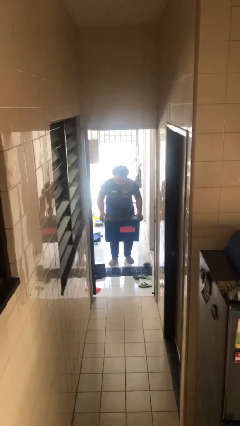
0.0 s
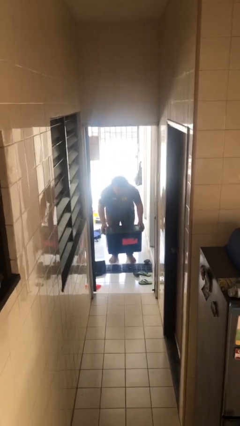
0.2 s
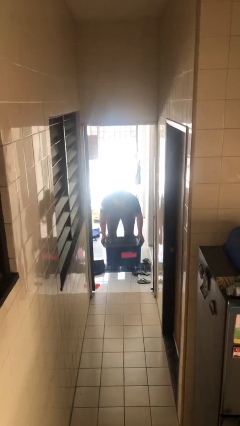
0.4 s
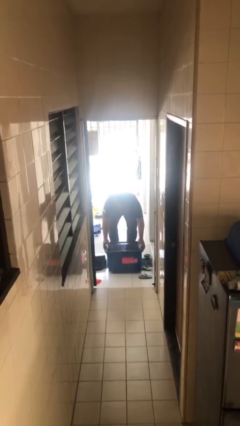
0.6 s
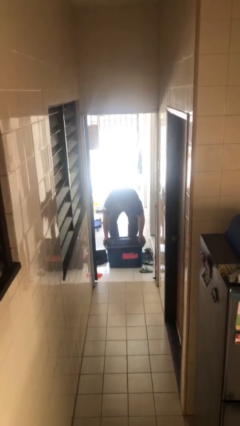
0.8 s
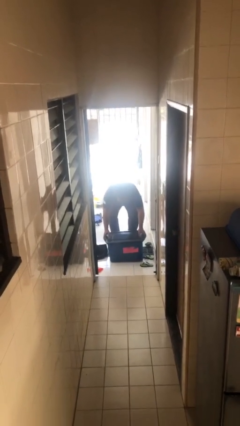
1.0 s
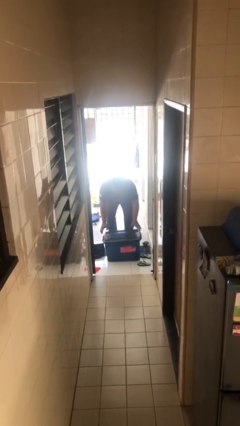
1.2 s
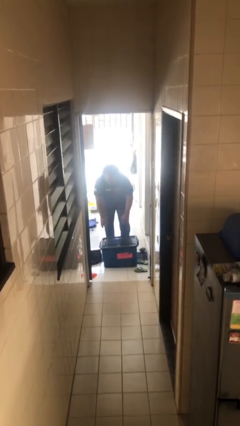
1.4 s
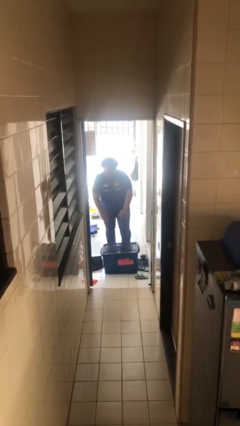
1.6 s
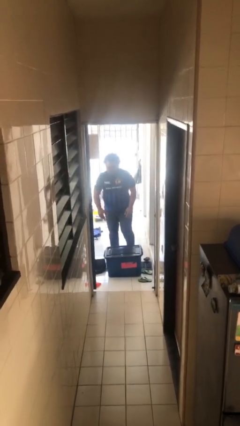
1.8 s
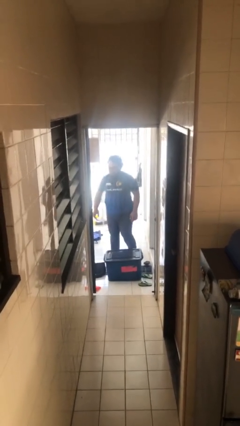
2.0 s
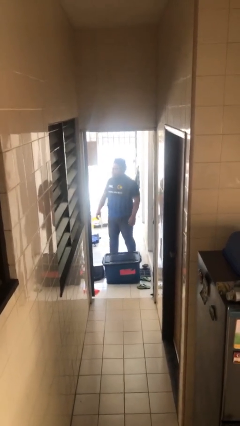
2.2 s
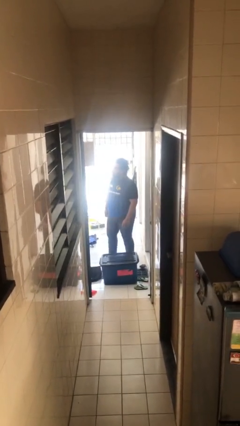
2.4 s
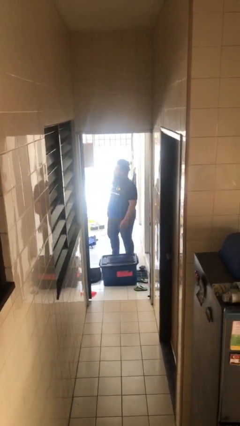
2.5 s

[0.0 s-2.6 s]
person puts down object on floor

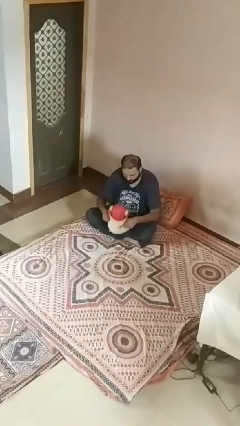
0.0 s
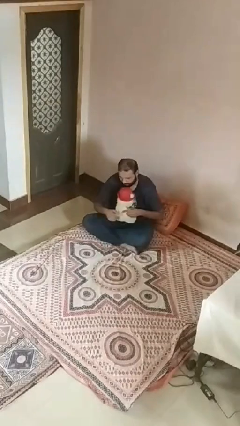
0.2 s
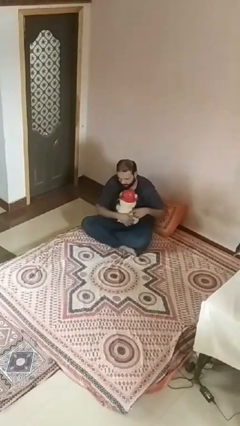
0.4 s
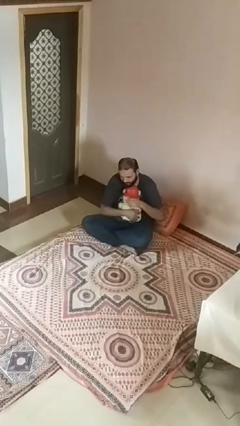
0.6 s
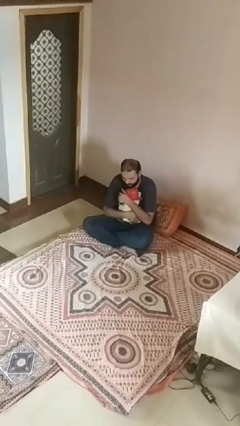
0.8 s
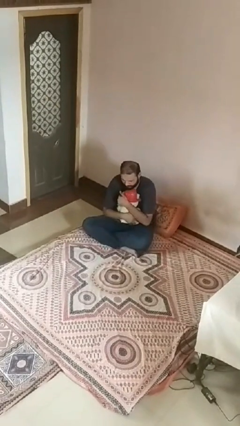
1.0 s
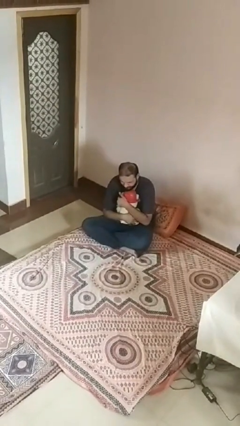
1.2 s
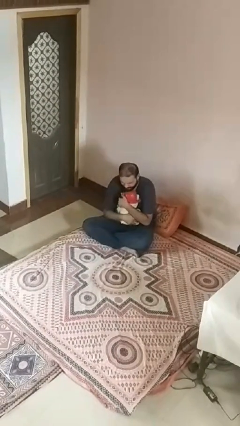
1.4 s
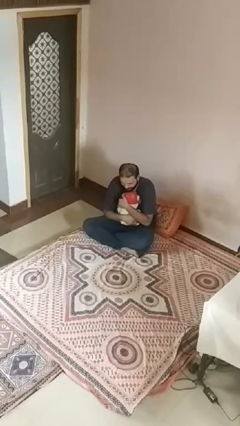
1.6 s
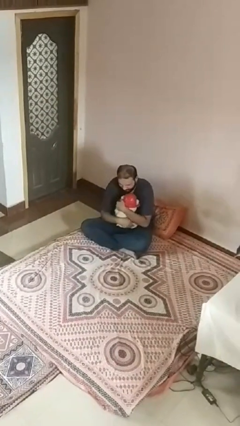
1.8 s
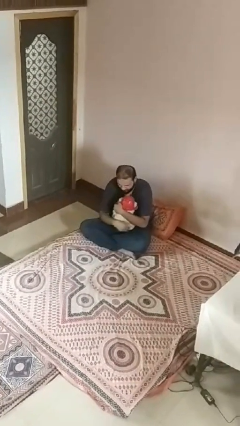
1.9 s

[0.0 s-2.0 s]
person hugs stuffed animal

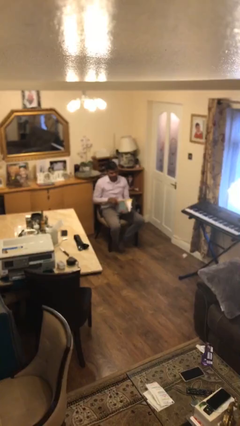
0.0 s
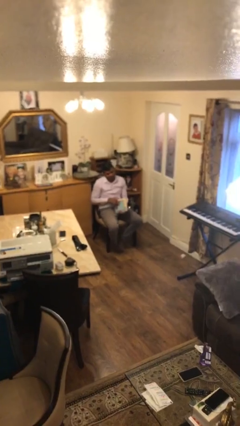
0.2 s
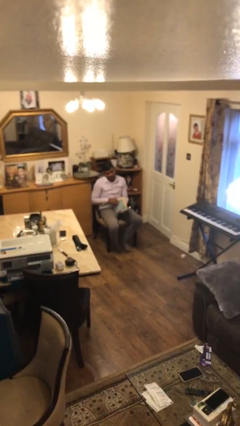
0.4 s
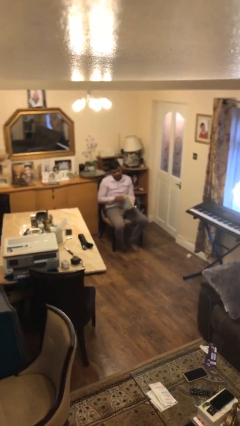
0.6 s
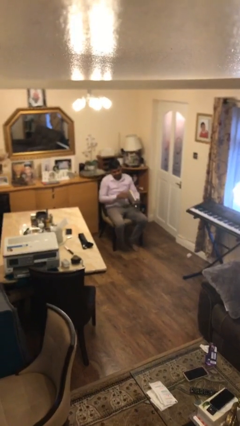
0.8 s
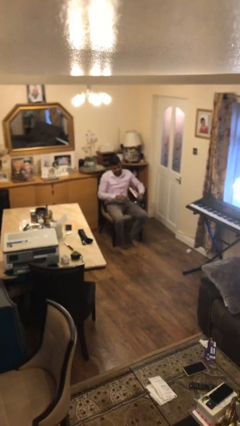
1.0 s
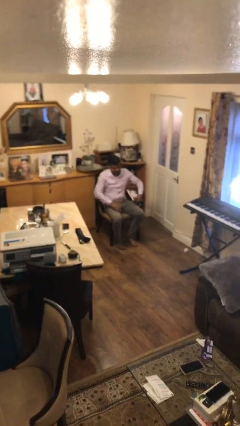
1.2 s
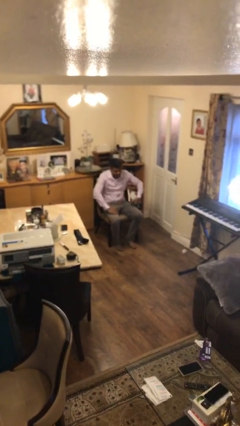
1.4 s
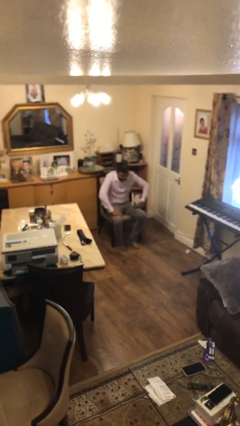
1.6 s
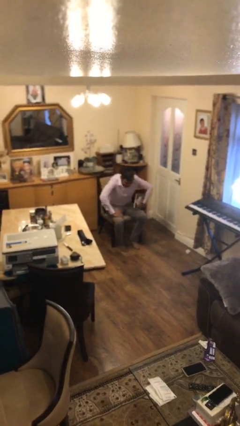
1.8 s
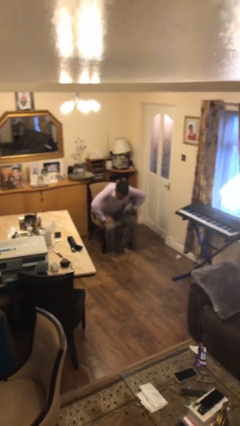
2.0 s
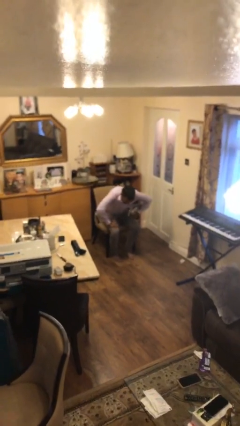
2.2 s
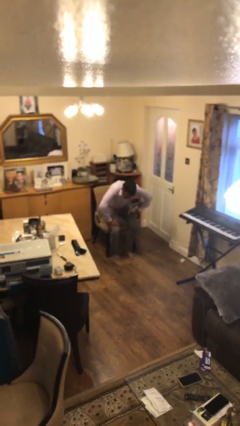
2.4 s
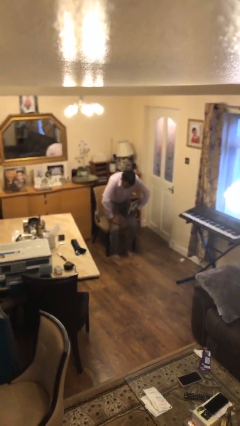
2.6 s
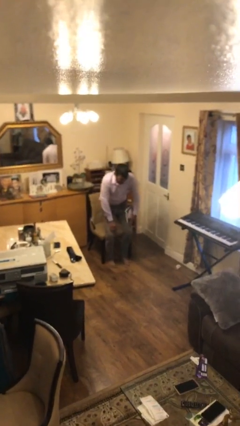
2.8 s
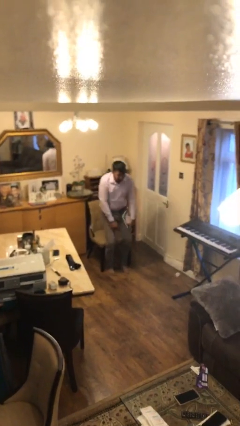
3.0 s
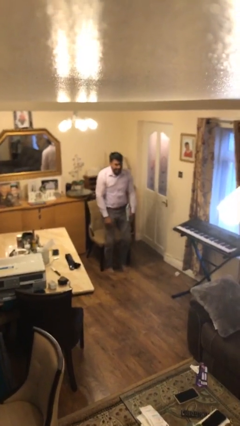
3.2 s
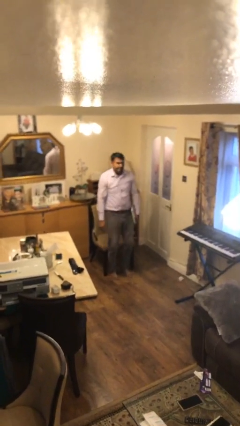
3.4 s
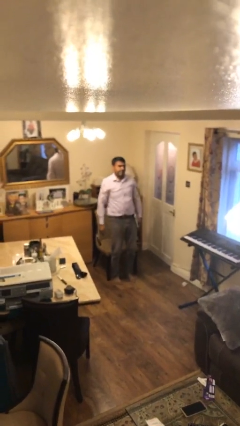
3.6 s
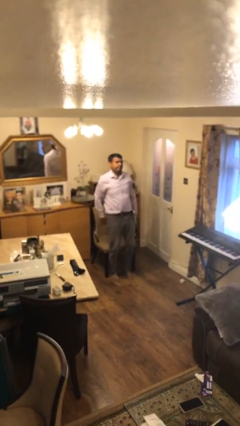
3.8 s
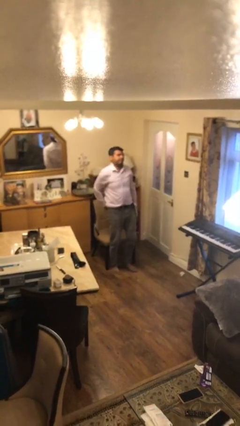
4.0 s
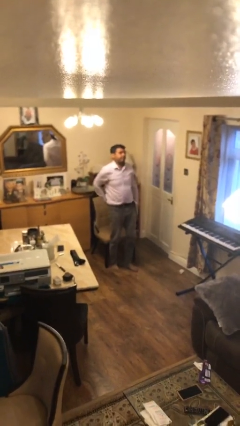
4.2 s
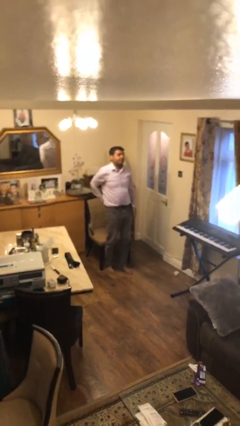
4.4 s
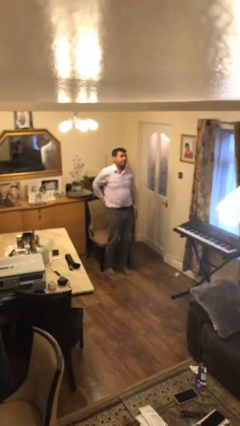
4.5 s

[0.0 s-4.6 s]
person stands up

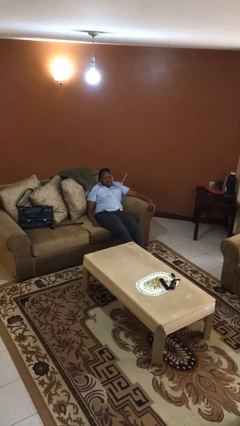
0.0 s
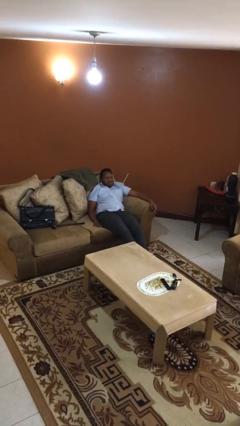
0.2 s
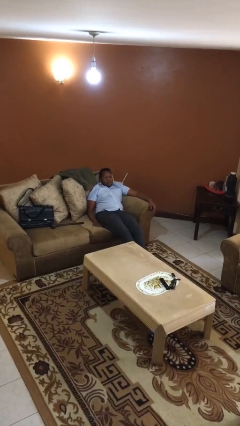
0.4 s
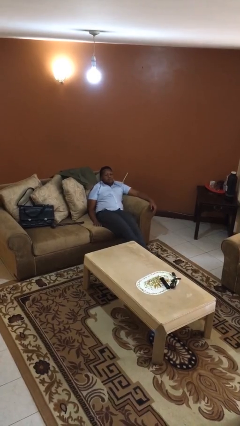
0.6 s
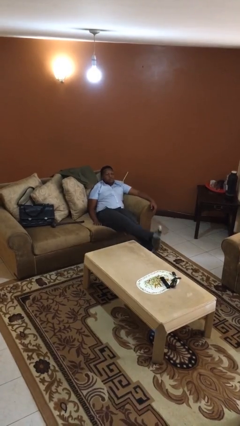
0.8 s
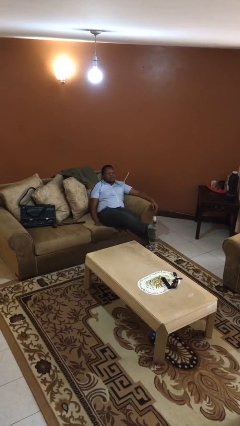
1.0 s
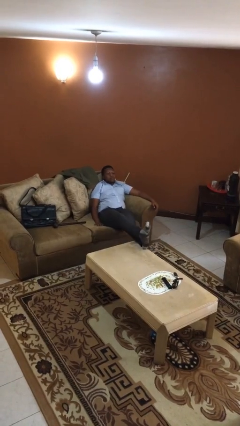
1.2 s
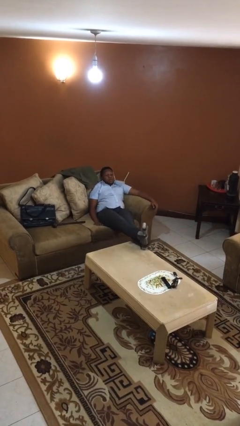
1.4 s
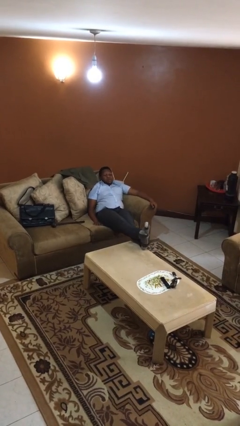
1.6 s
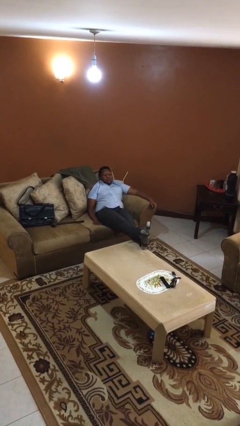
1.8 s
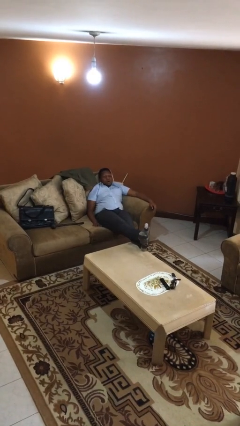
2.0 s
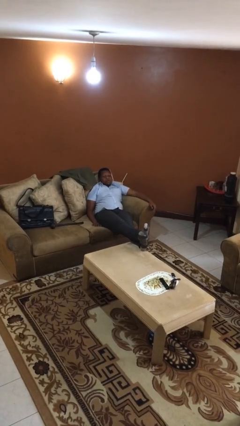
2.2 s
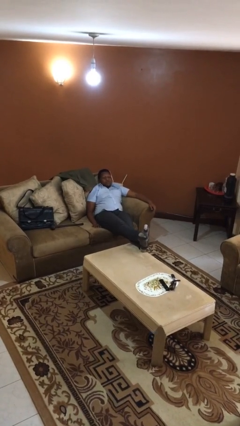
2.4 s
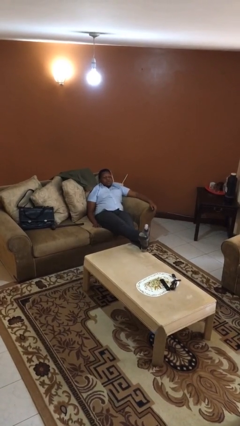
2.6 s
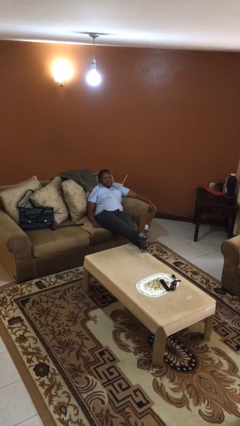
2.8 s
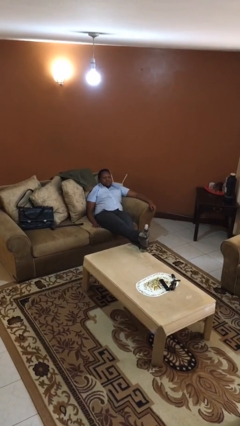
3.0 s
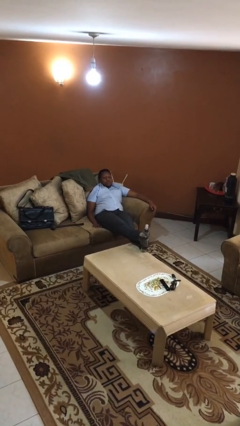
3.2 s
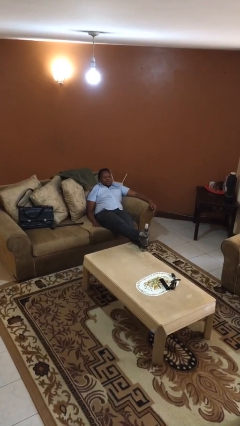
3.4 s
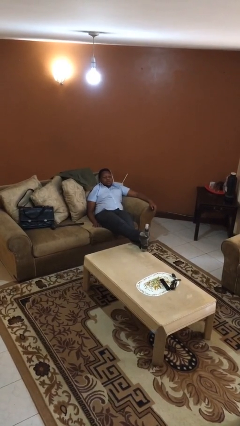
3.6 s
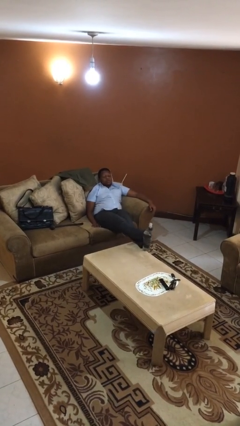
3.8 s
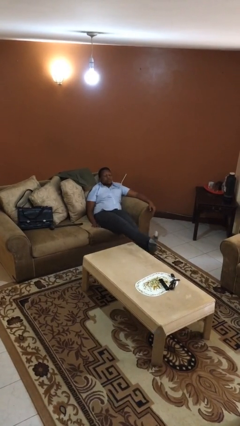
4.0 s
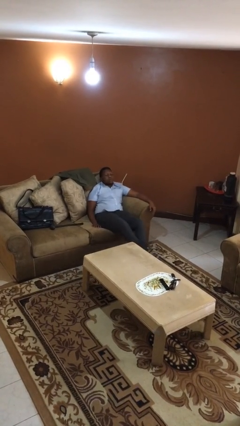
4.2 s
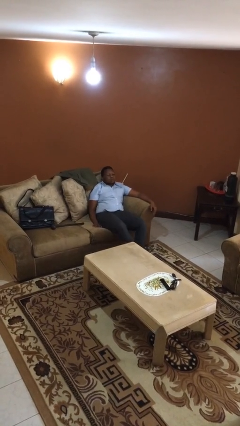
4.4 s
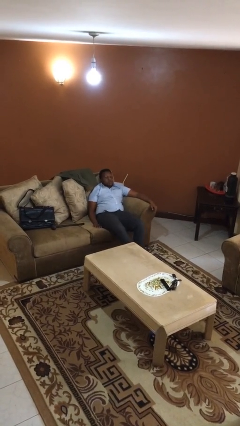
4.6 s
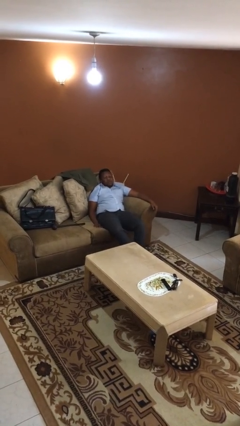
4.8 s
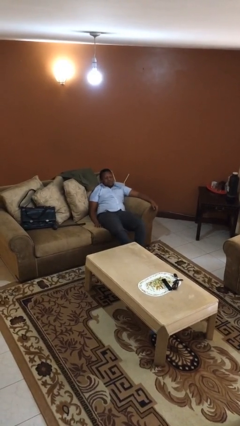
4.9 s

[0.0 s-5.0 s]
person puts feet up

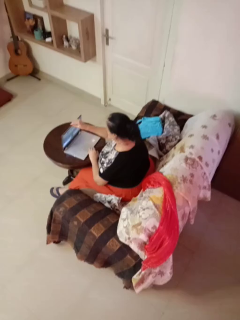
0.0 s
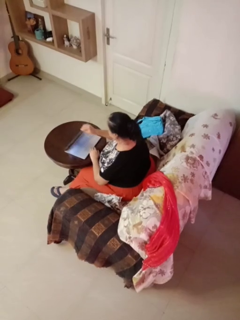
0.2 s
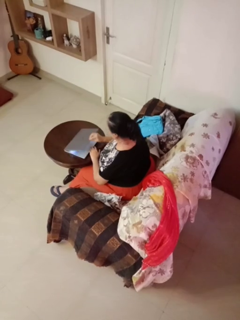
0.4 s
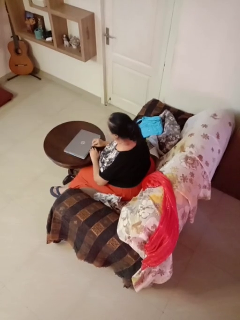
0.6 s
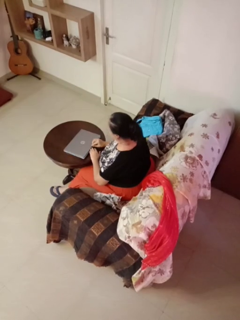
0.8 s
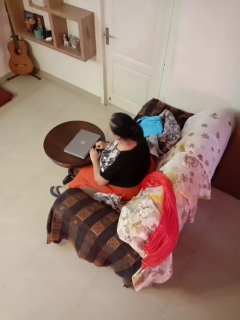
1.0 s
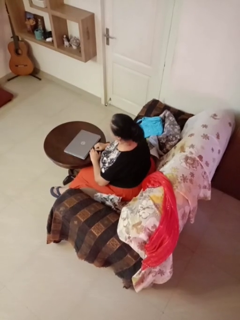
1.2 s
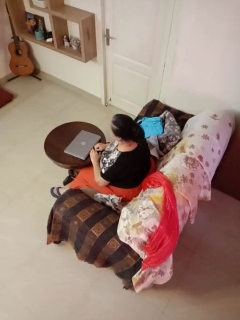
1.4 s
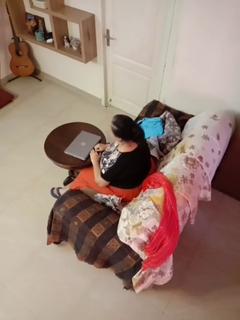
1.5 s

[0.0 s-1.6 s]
person closes laptop

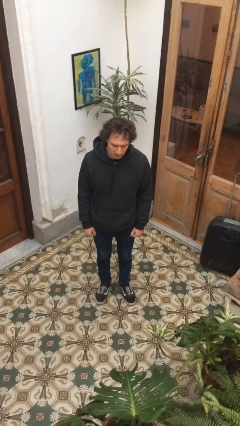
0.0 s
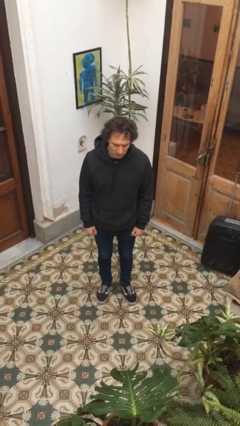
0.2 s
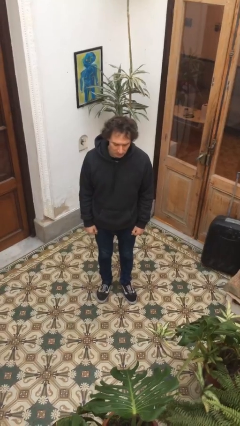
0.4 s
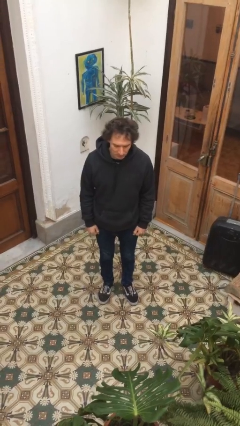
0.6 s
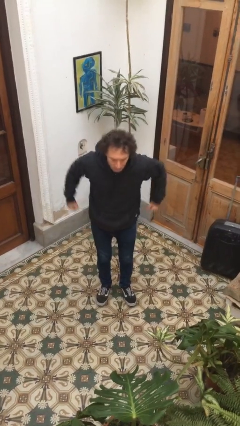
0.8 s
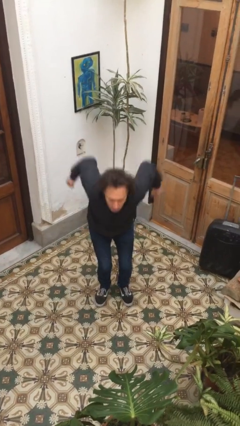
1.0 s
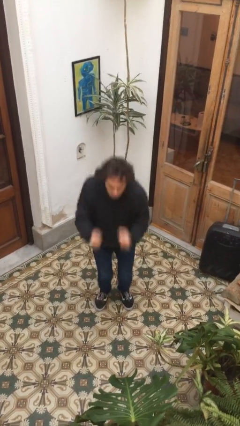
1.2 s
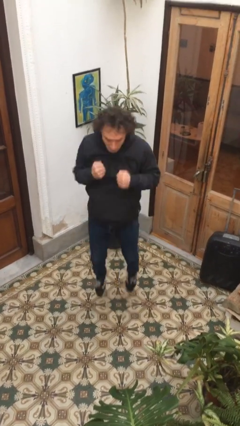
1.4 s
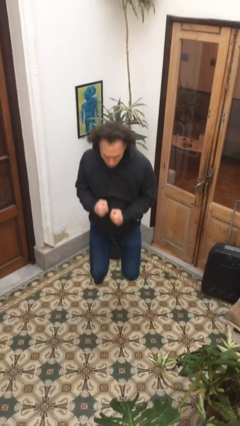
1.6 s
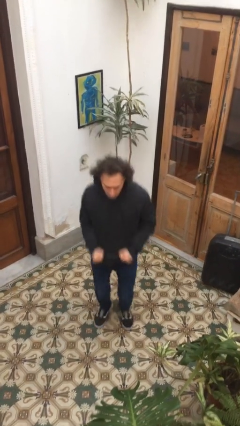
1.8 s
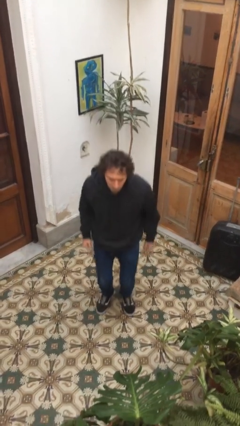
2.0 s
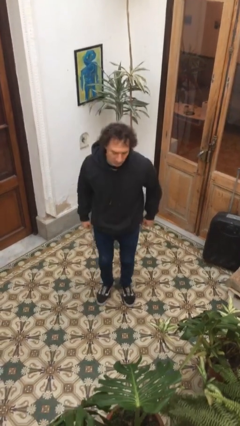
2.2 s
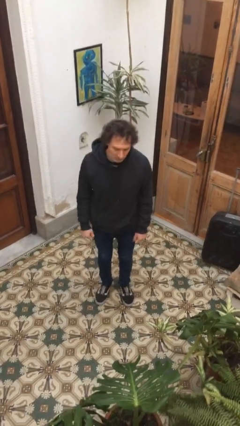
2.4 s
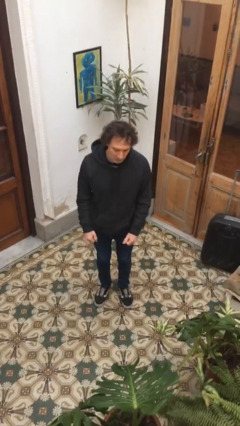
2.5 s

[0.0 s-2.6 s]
person jumps
